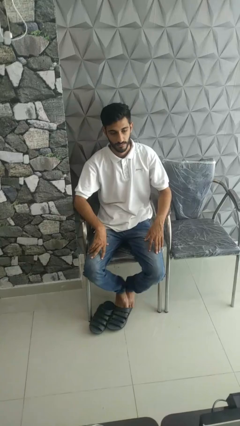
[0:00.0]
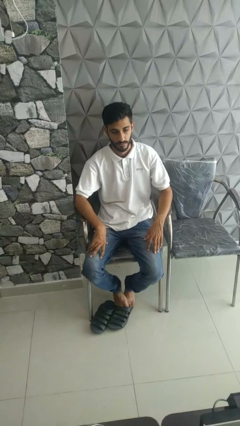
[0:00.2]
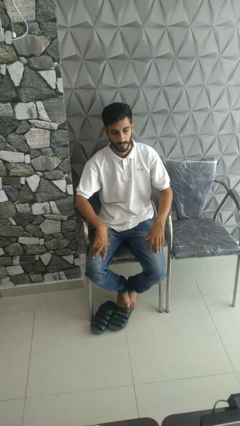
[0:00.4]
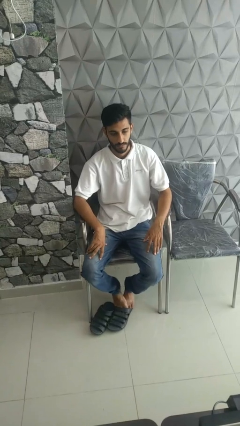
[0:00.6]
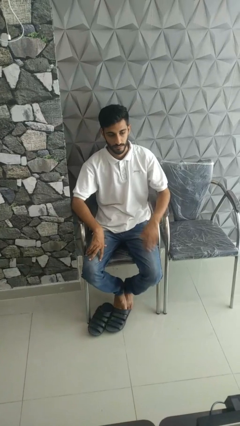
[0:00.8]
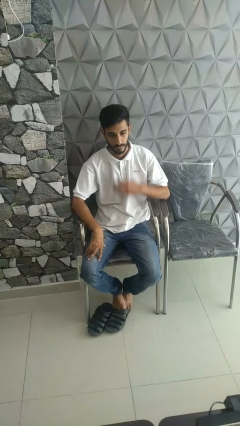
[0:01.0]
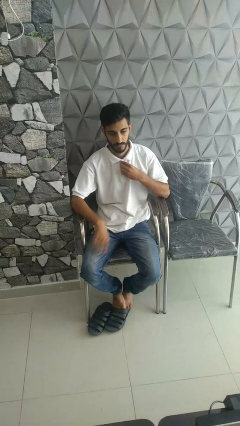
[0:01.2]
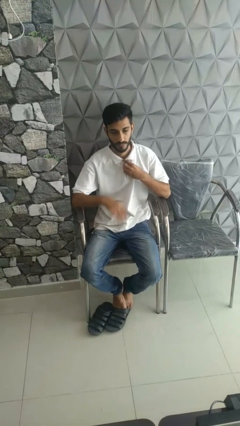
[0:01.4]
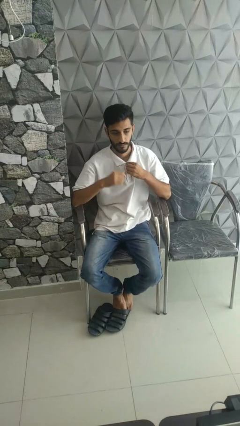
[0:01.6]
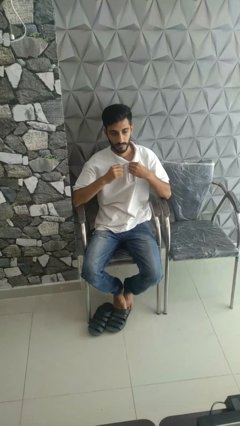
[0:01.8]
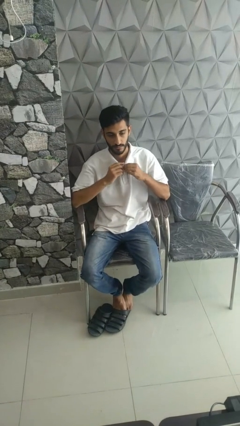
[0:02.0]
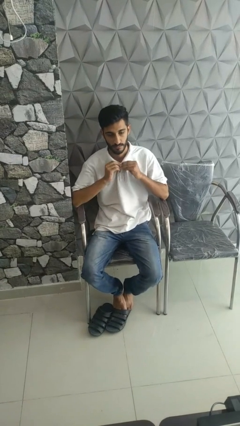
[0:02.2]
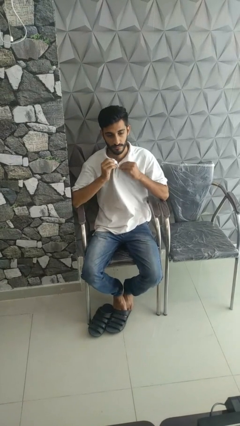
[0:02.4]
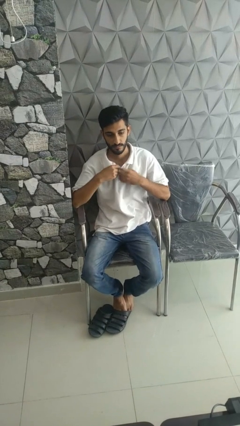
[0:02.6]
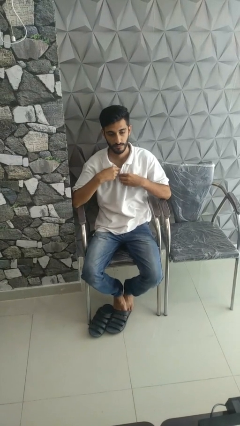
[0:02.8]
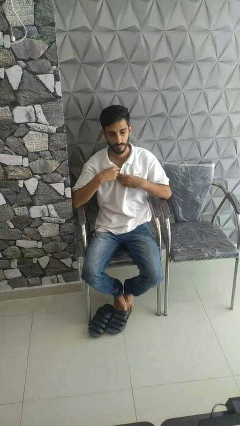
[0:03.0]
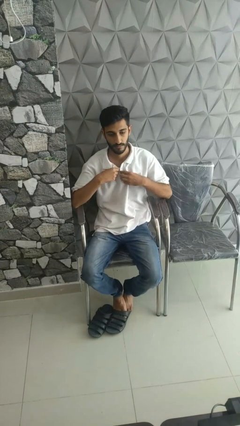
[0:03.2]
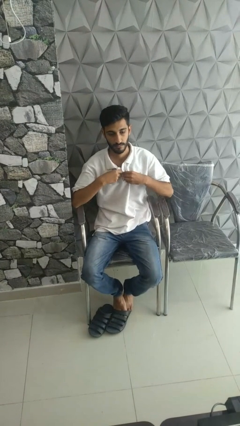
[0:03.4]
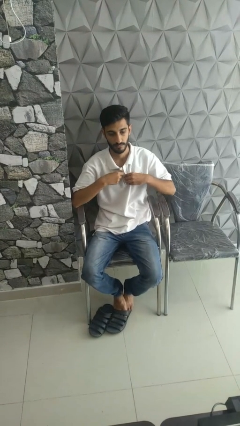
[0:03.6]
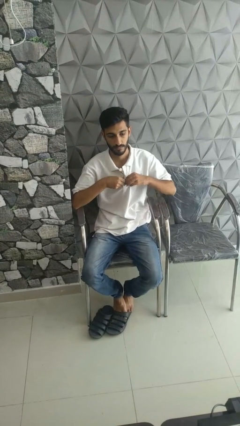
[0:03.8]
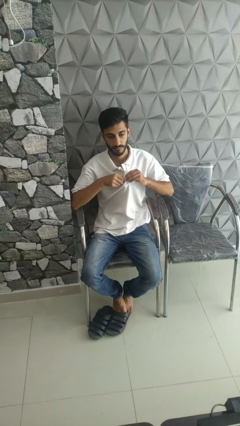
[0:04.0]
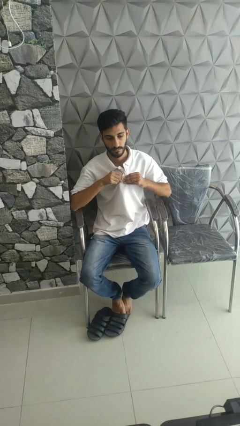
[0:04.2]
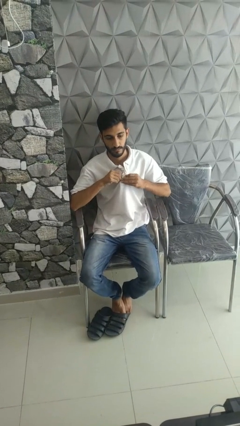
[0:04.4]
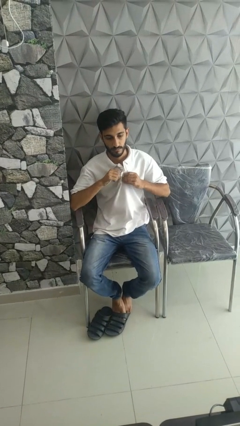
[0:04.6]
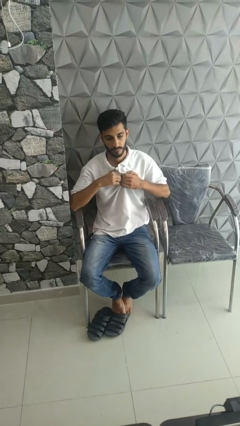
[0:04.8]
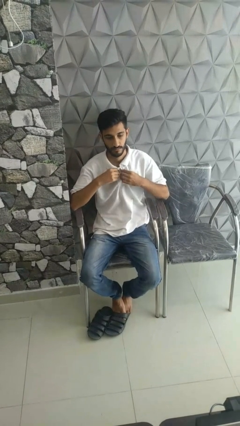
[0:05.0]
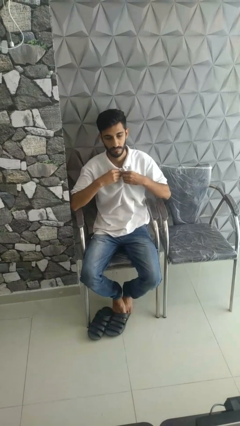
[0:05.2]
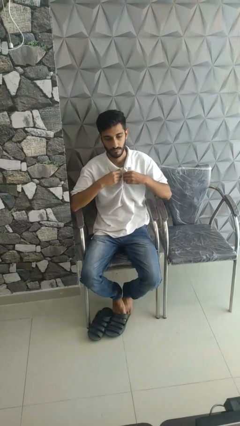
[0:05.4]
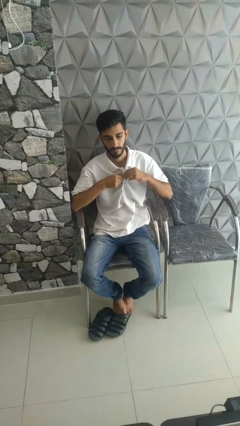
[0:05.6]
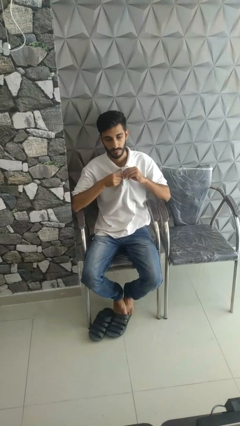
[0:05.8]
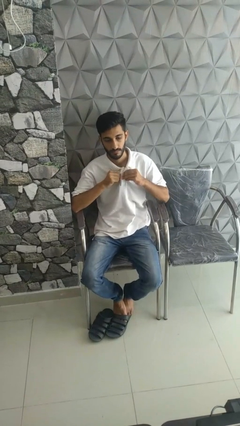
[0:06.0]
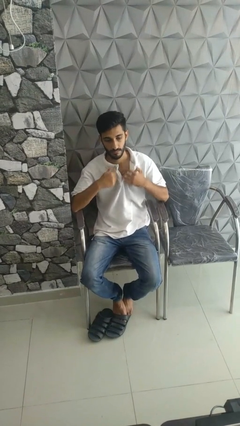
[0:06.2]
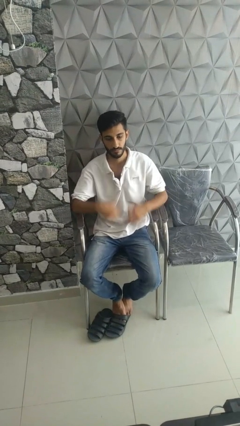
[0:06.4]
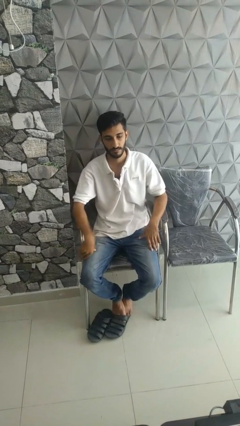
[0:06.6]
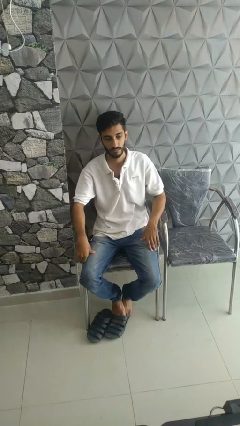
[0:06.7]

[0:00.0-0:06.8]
person unbuttons shirt

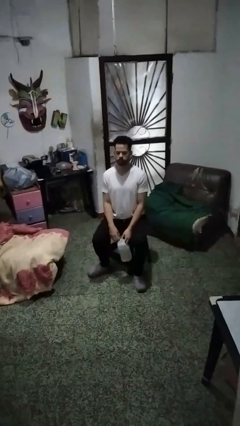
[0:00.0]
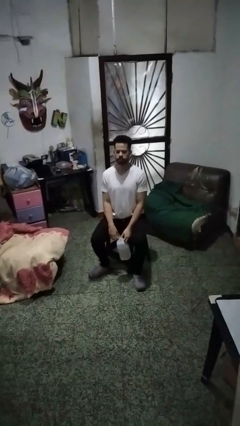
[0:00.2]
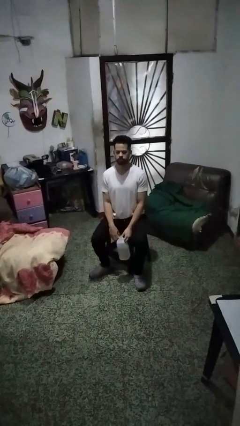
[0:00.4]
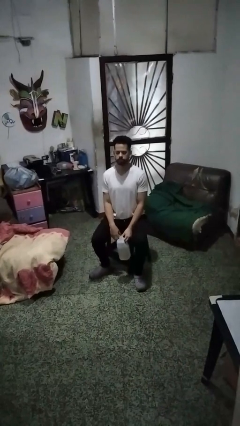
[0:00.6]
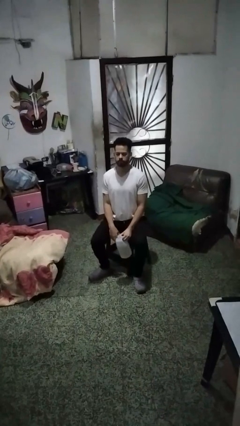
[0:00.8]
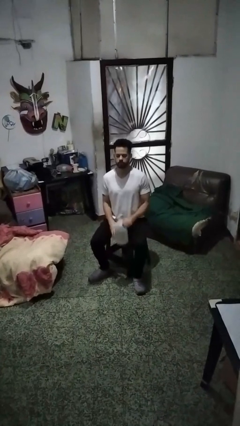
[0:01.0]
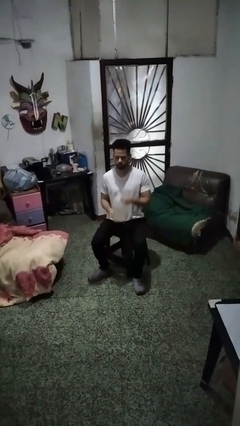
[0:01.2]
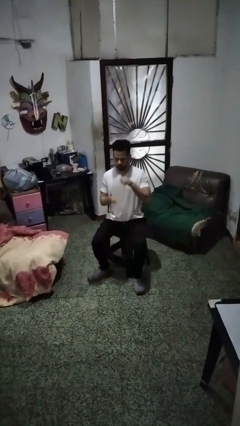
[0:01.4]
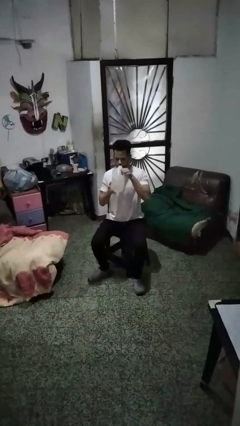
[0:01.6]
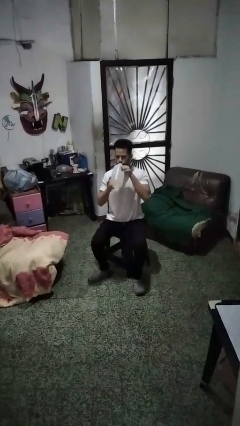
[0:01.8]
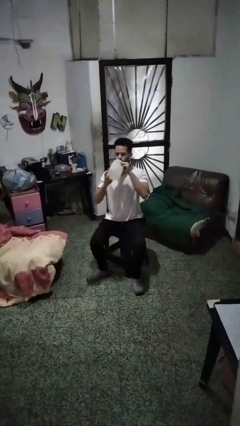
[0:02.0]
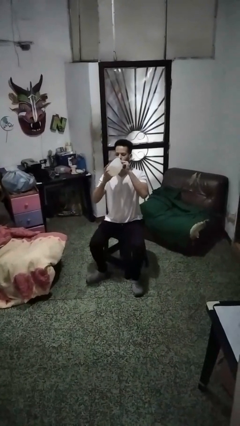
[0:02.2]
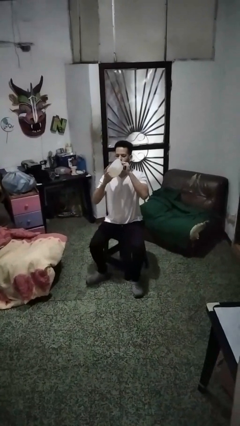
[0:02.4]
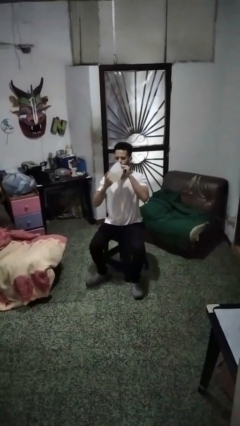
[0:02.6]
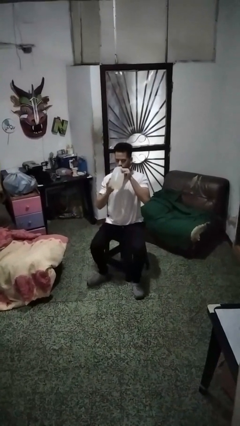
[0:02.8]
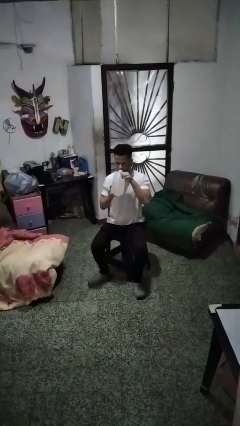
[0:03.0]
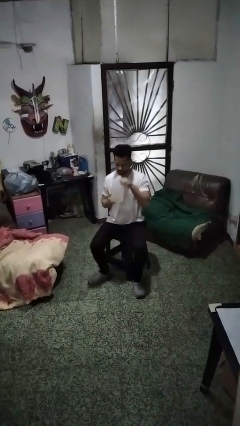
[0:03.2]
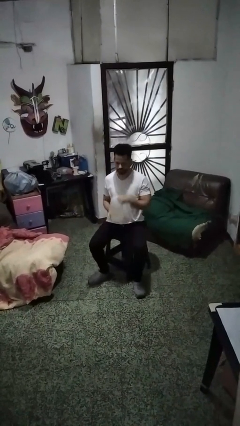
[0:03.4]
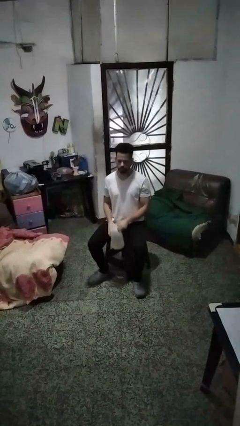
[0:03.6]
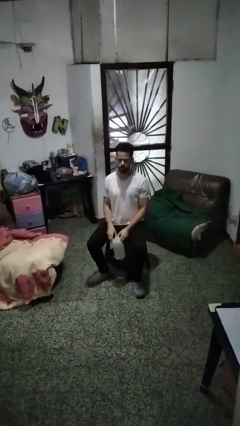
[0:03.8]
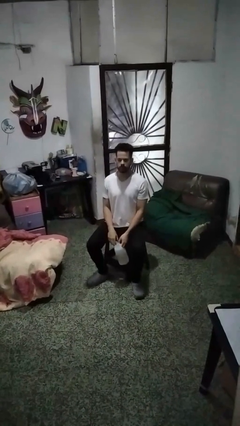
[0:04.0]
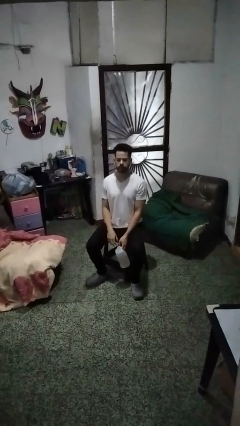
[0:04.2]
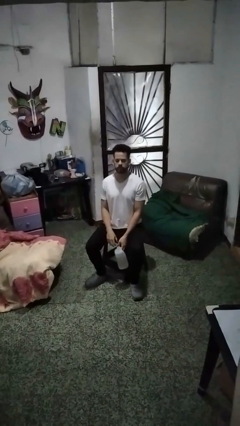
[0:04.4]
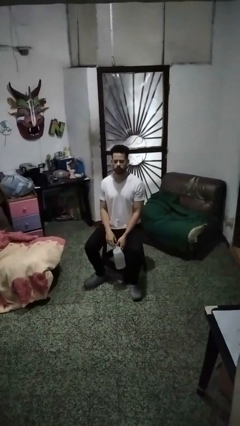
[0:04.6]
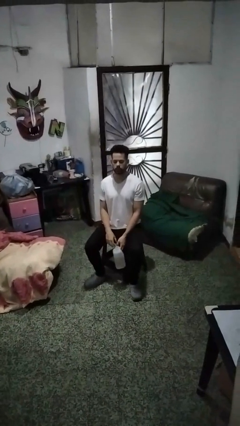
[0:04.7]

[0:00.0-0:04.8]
person drinks from bottle

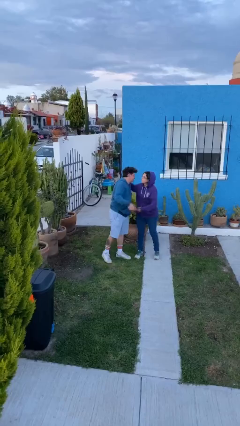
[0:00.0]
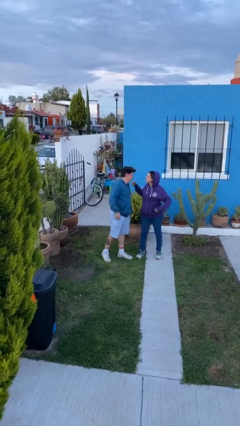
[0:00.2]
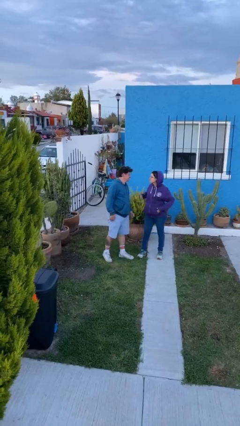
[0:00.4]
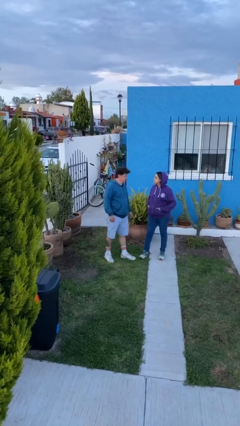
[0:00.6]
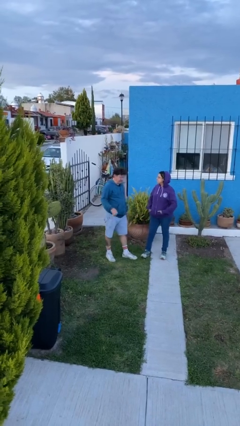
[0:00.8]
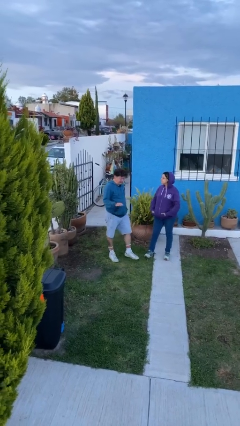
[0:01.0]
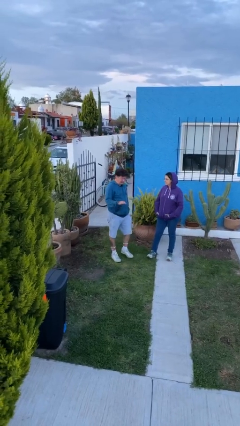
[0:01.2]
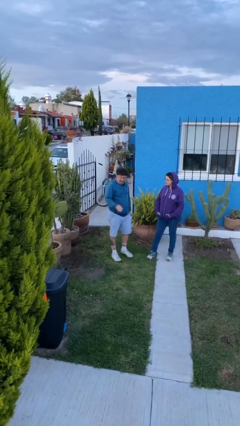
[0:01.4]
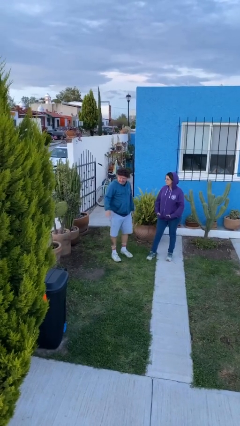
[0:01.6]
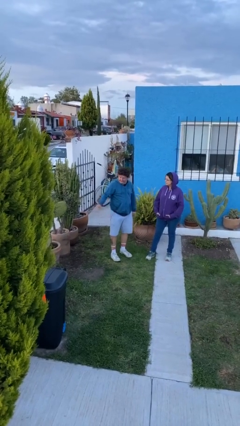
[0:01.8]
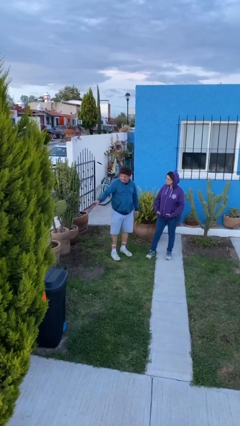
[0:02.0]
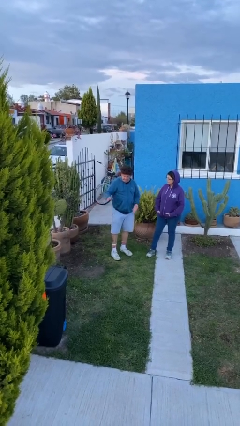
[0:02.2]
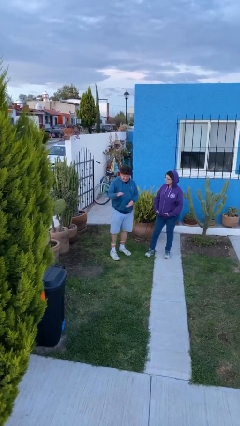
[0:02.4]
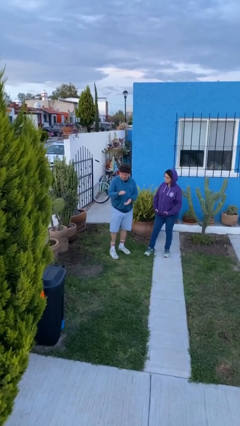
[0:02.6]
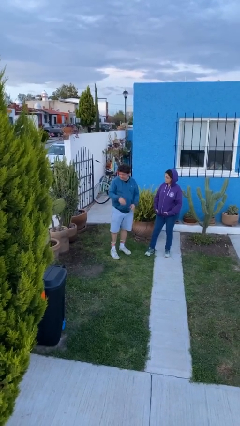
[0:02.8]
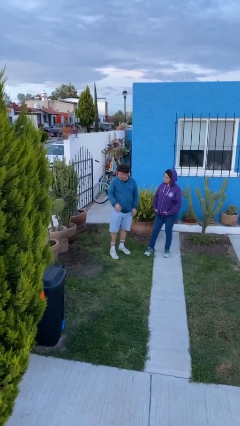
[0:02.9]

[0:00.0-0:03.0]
person talks to person

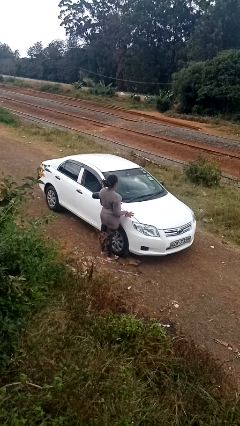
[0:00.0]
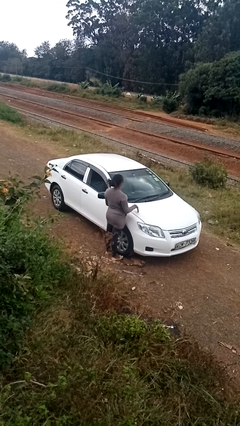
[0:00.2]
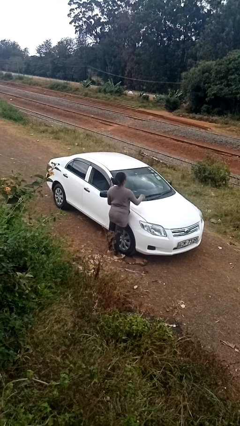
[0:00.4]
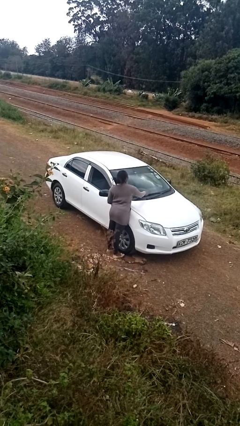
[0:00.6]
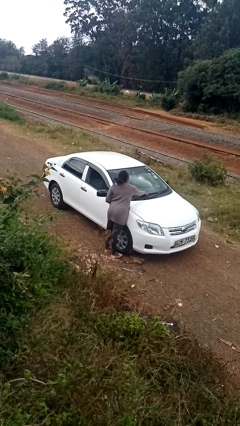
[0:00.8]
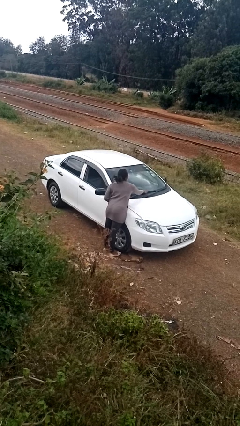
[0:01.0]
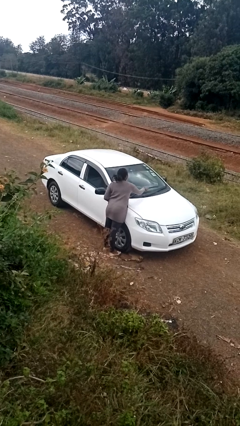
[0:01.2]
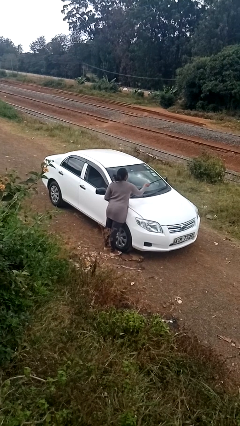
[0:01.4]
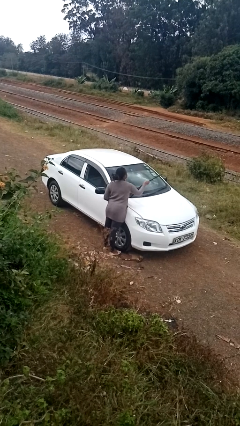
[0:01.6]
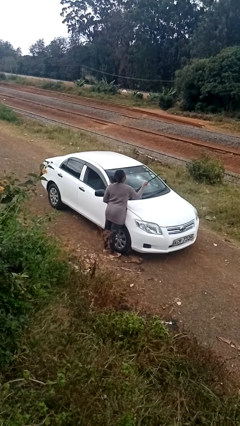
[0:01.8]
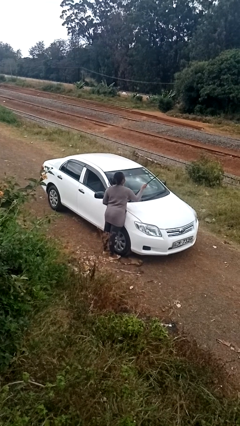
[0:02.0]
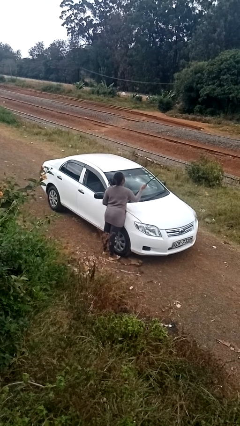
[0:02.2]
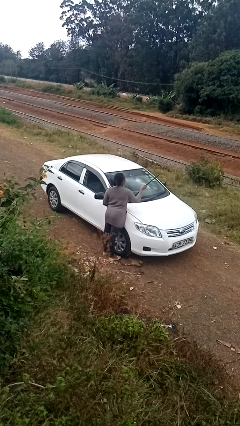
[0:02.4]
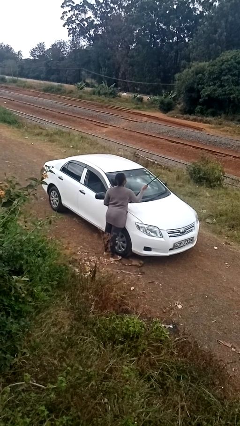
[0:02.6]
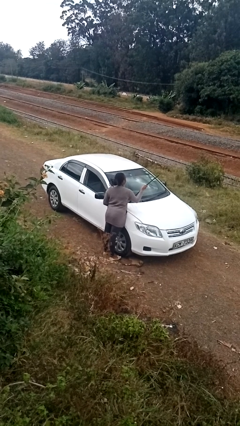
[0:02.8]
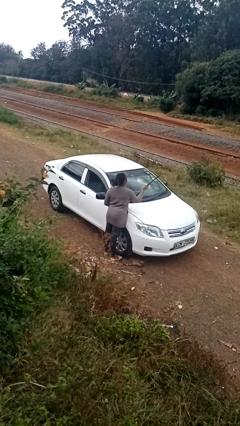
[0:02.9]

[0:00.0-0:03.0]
person flips up car wipers
